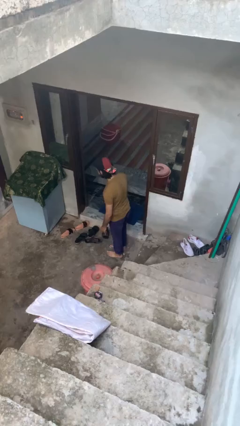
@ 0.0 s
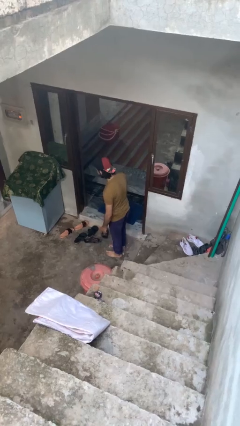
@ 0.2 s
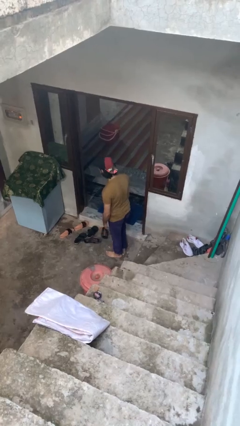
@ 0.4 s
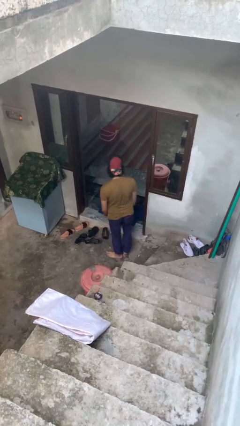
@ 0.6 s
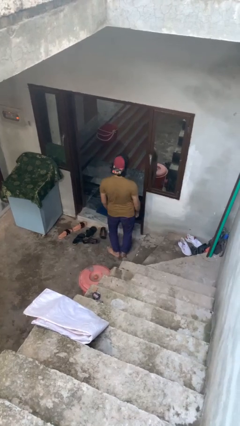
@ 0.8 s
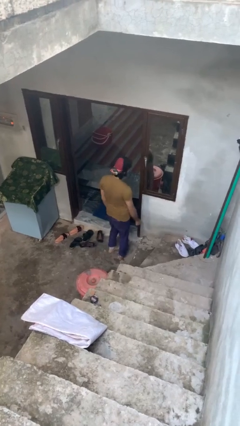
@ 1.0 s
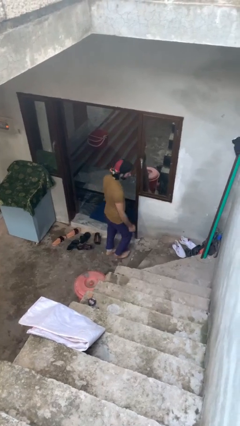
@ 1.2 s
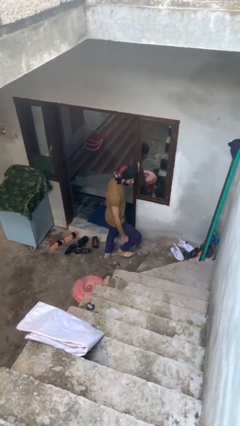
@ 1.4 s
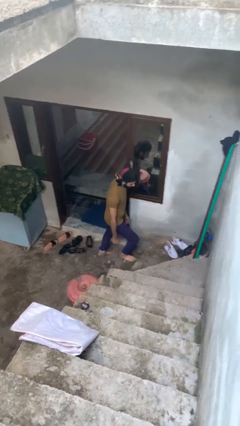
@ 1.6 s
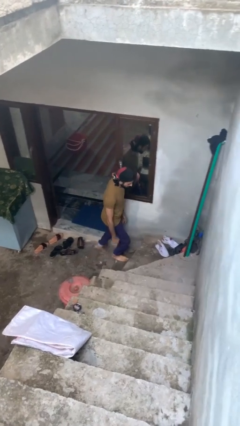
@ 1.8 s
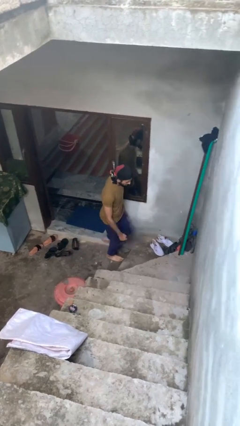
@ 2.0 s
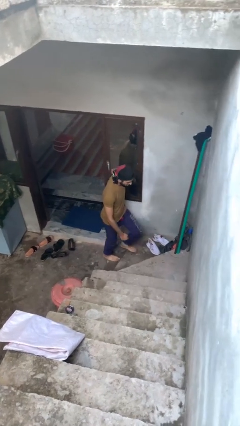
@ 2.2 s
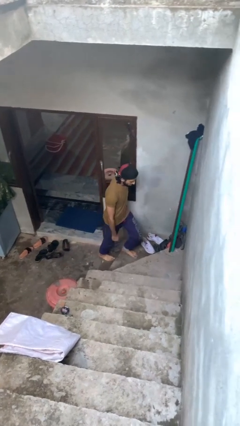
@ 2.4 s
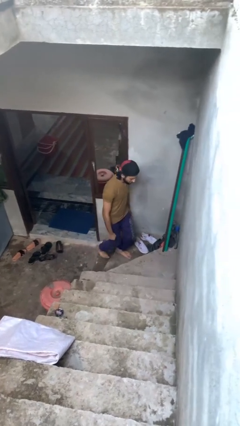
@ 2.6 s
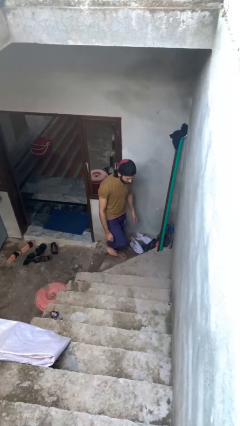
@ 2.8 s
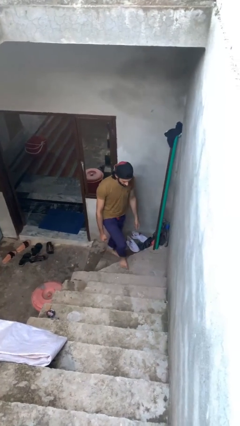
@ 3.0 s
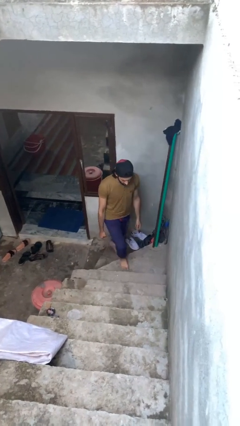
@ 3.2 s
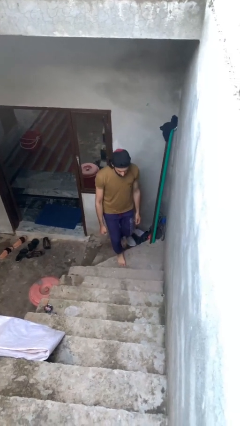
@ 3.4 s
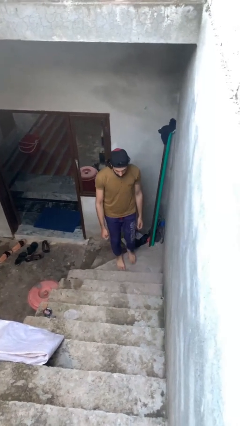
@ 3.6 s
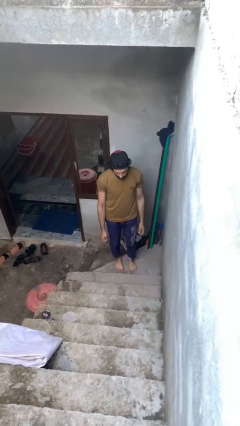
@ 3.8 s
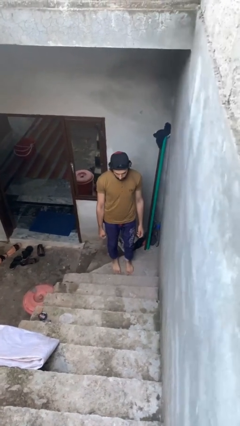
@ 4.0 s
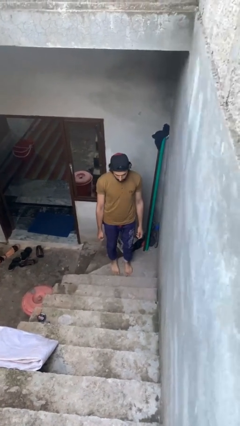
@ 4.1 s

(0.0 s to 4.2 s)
person climbs up stairs

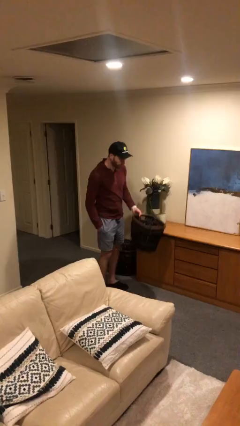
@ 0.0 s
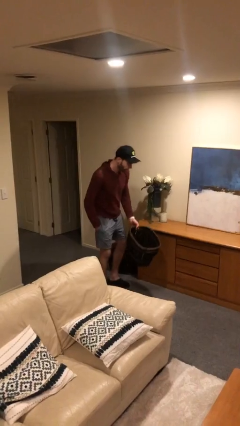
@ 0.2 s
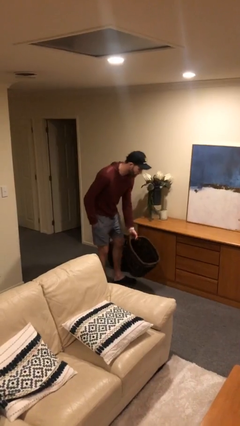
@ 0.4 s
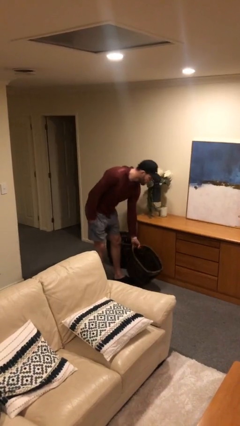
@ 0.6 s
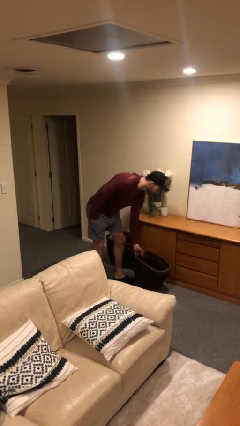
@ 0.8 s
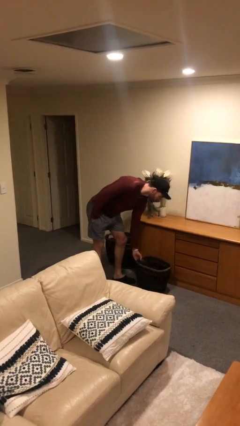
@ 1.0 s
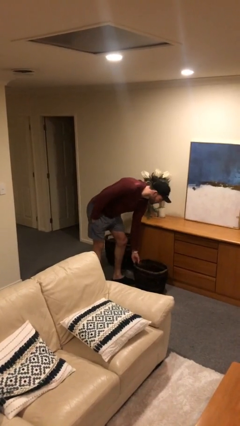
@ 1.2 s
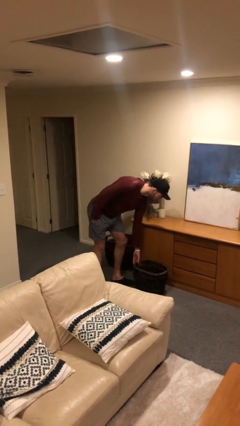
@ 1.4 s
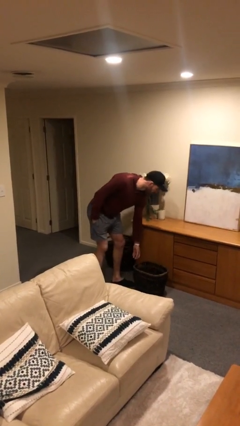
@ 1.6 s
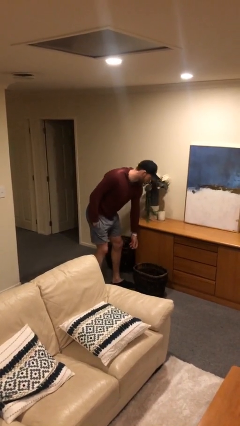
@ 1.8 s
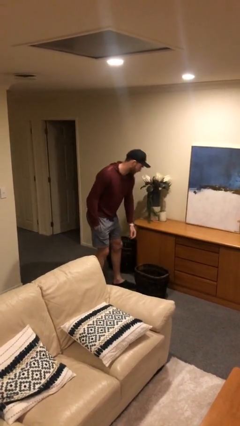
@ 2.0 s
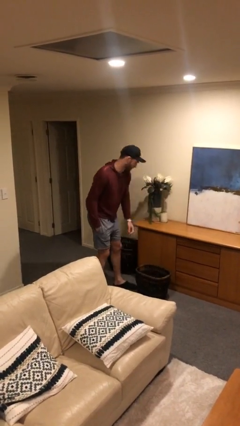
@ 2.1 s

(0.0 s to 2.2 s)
person puts down object on floor

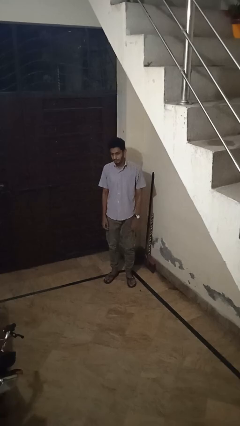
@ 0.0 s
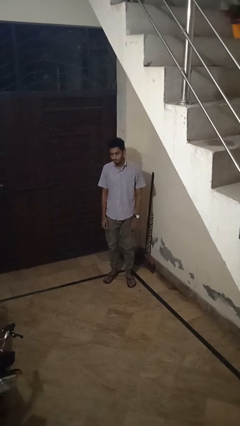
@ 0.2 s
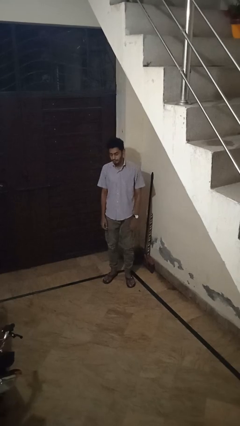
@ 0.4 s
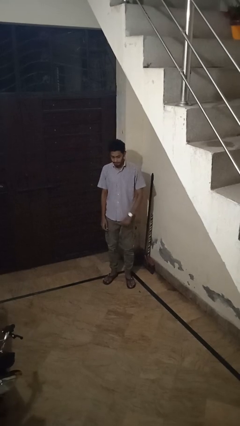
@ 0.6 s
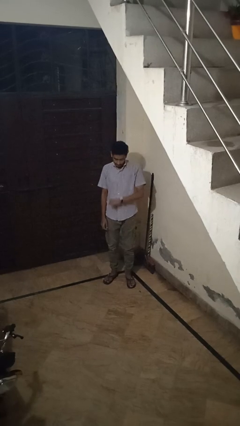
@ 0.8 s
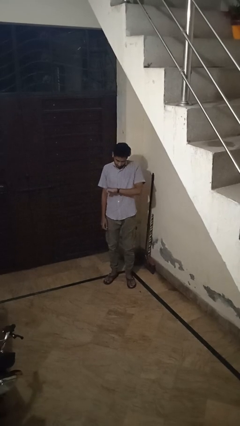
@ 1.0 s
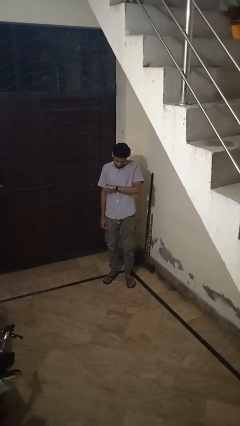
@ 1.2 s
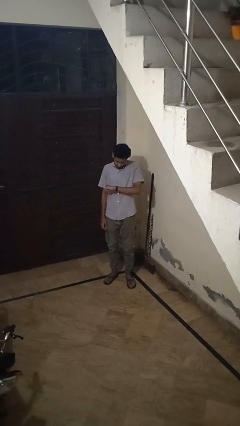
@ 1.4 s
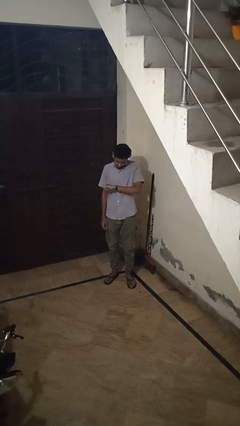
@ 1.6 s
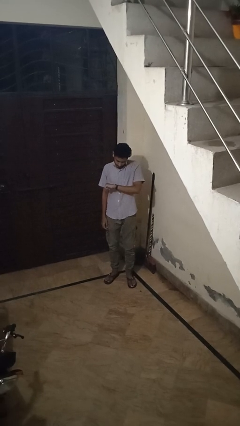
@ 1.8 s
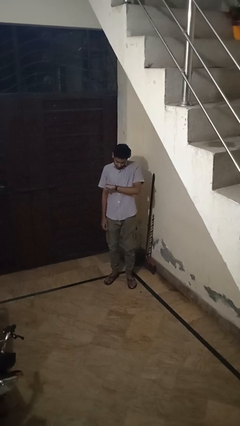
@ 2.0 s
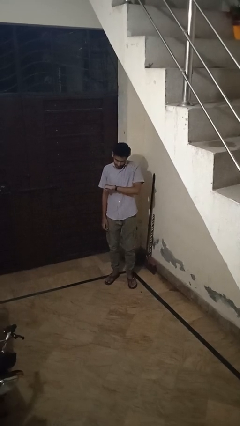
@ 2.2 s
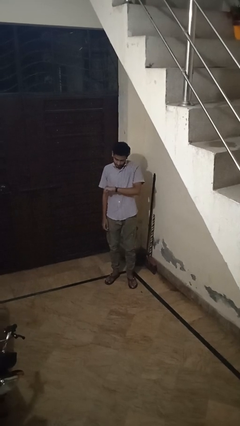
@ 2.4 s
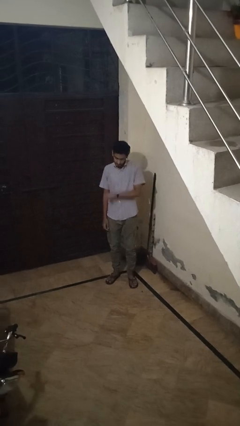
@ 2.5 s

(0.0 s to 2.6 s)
person looks at wristwatch

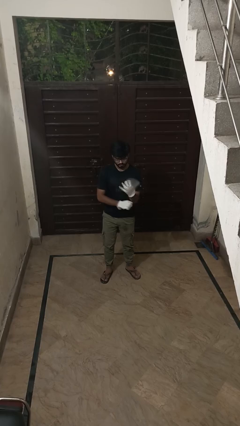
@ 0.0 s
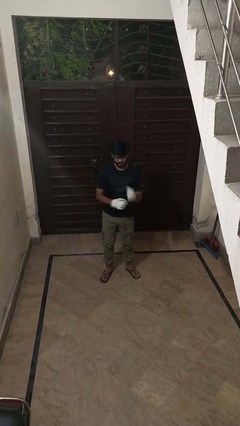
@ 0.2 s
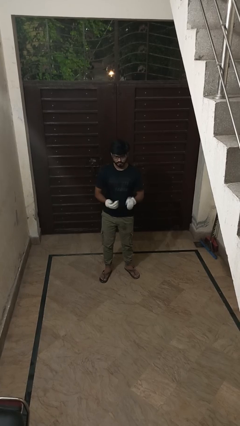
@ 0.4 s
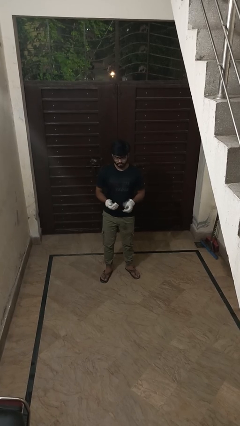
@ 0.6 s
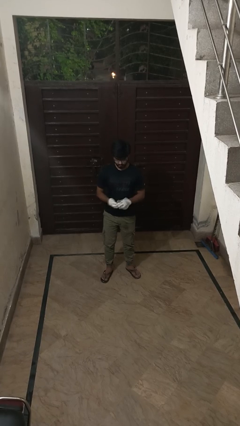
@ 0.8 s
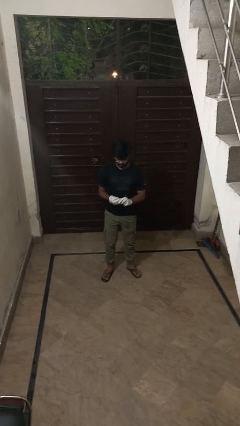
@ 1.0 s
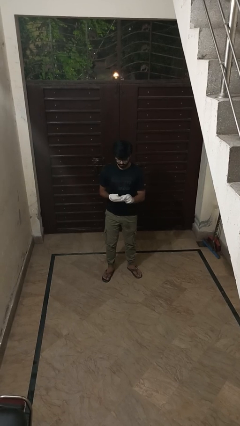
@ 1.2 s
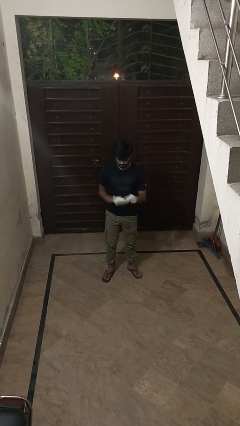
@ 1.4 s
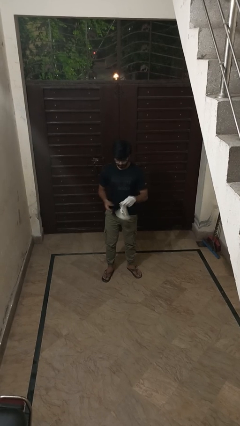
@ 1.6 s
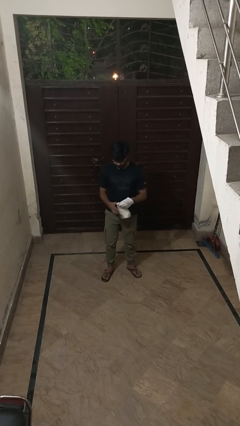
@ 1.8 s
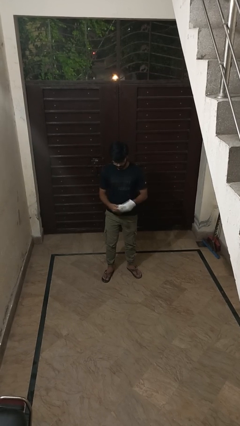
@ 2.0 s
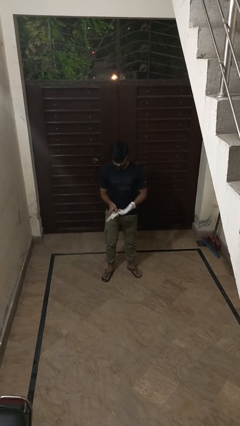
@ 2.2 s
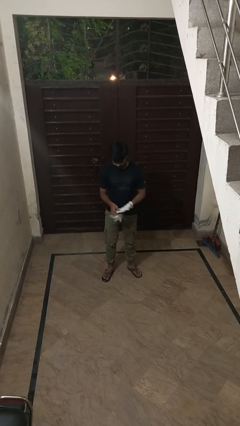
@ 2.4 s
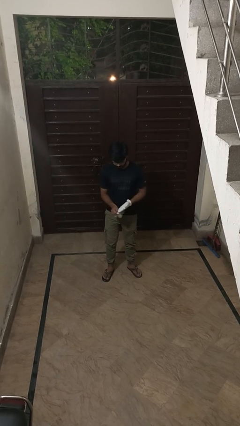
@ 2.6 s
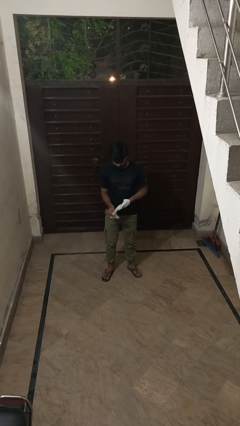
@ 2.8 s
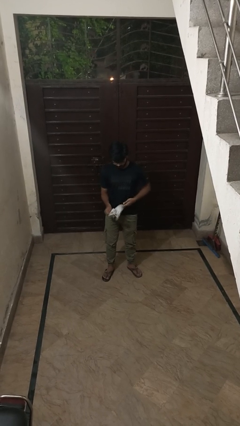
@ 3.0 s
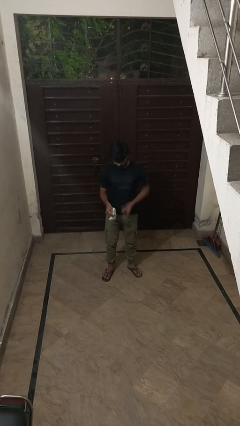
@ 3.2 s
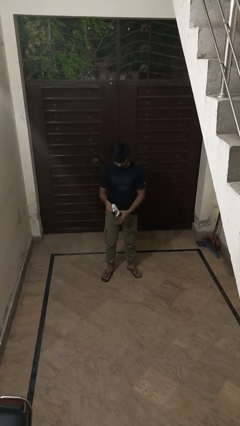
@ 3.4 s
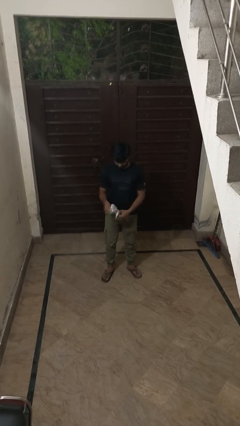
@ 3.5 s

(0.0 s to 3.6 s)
person takes off gloves

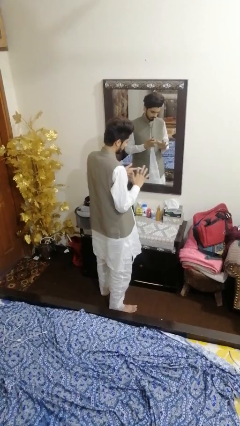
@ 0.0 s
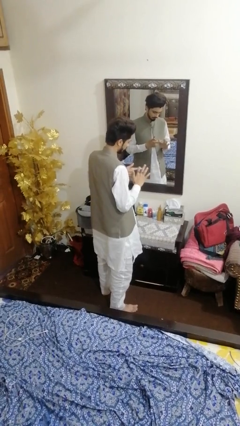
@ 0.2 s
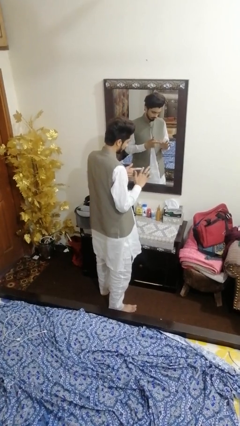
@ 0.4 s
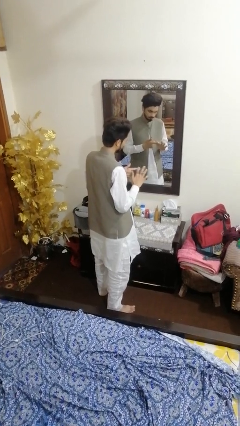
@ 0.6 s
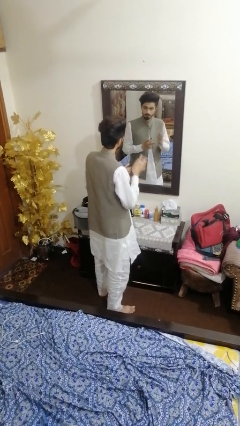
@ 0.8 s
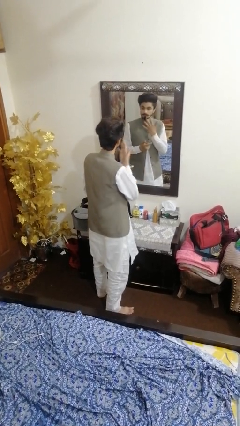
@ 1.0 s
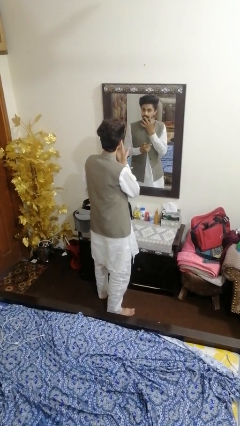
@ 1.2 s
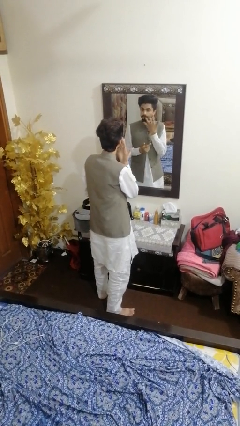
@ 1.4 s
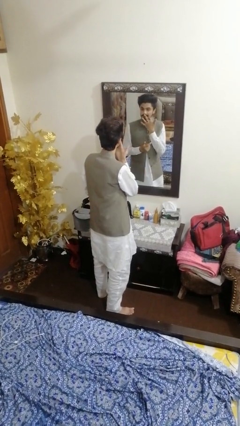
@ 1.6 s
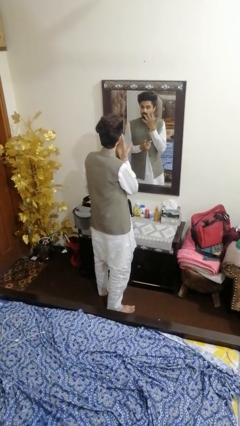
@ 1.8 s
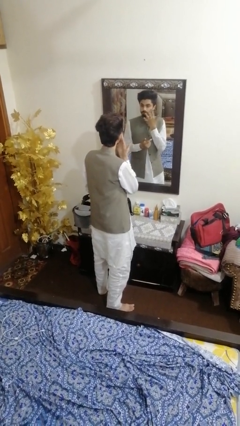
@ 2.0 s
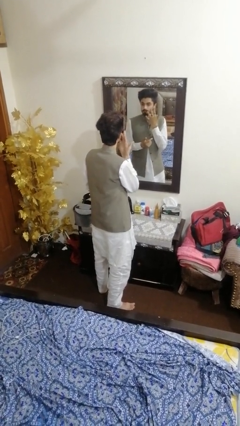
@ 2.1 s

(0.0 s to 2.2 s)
person applies foundation makeup

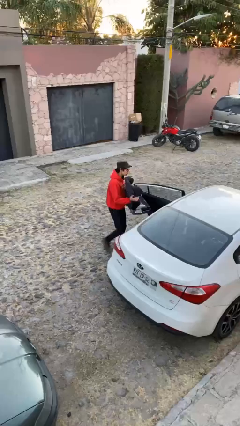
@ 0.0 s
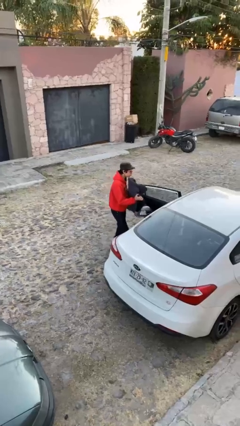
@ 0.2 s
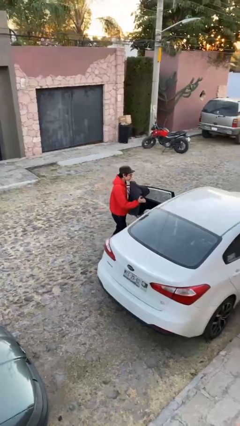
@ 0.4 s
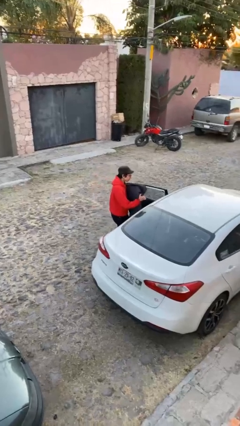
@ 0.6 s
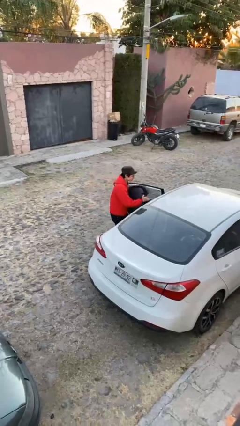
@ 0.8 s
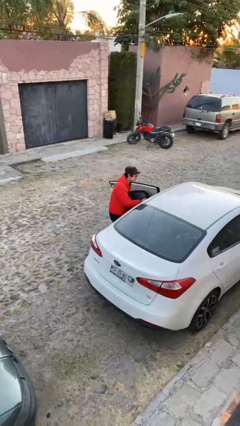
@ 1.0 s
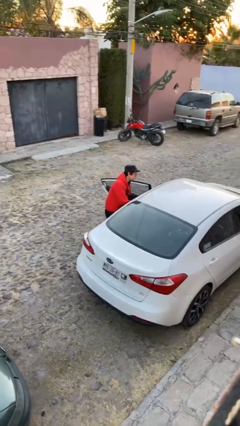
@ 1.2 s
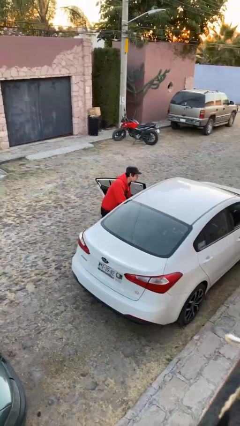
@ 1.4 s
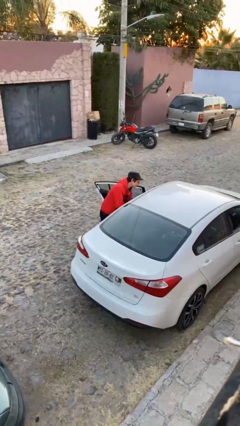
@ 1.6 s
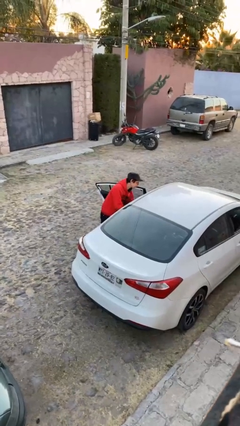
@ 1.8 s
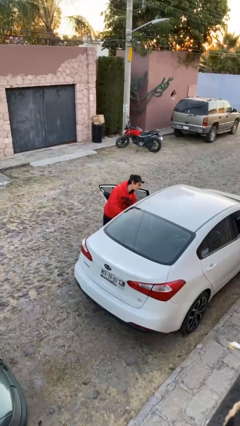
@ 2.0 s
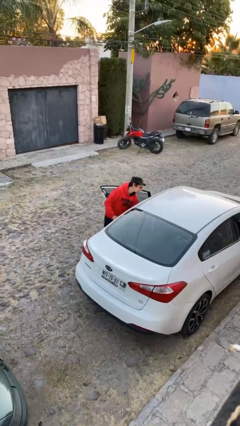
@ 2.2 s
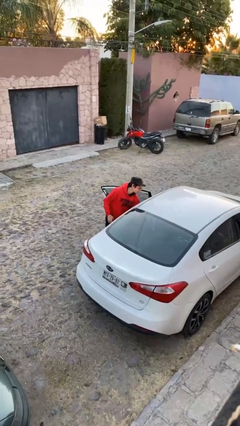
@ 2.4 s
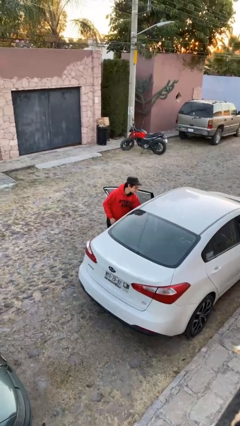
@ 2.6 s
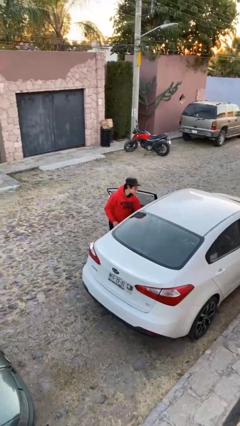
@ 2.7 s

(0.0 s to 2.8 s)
person loads car
